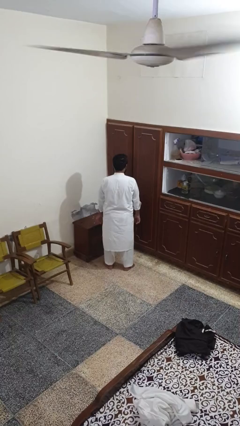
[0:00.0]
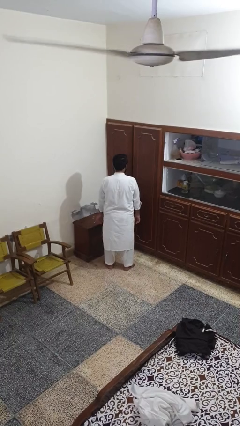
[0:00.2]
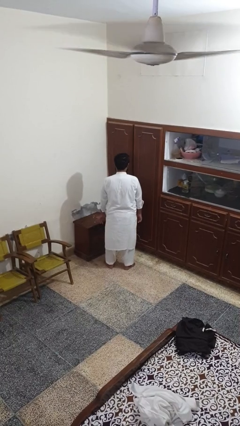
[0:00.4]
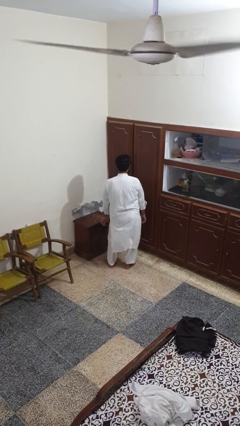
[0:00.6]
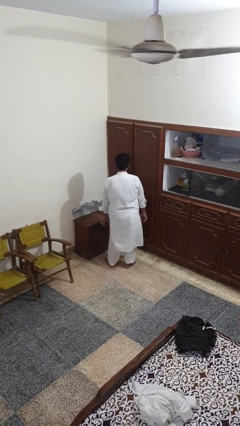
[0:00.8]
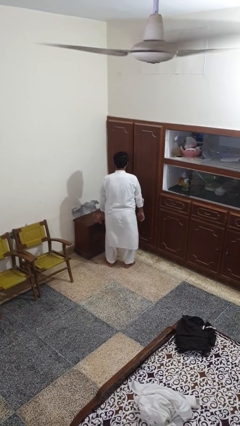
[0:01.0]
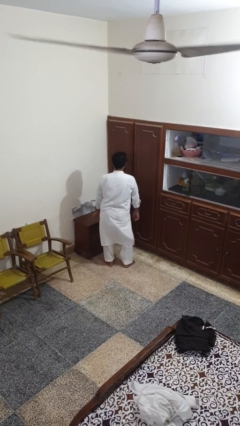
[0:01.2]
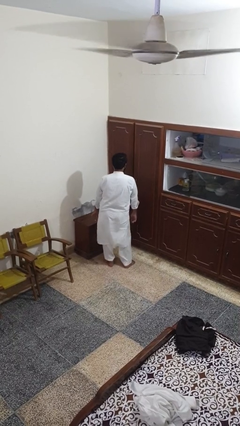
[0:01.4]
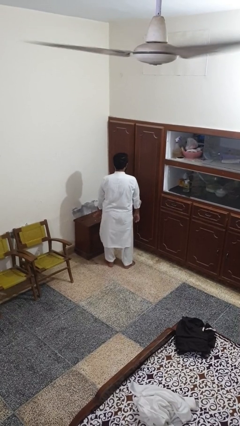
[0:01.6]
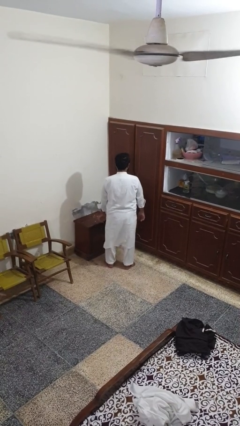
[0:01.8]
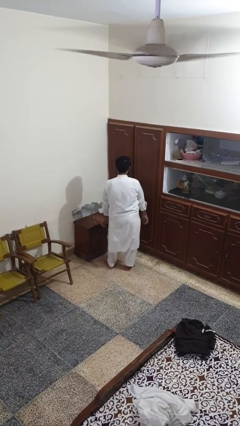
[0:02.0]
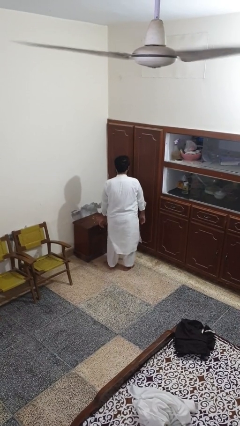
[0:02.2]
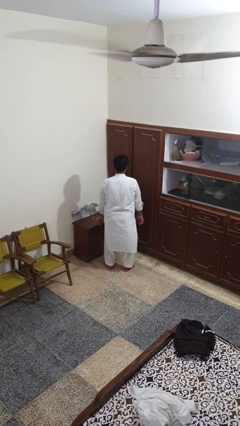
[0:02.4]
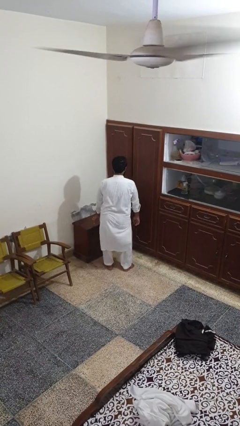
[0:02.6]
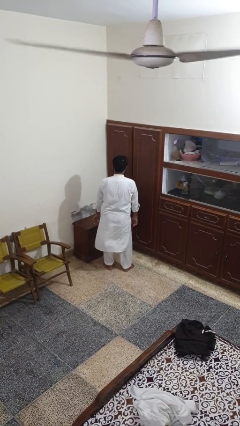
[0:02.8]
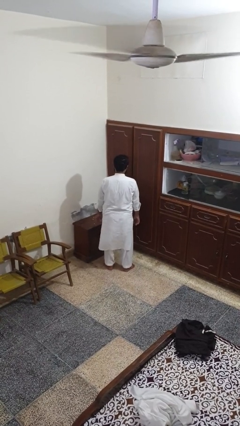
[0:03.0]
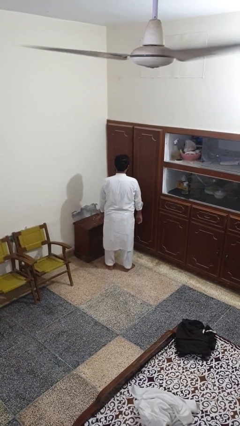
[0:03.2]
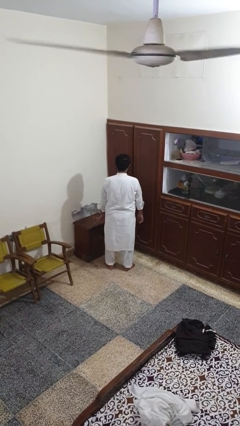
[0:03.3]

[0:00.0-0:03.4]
person wiggles hips

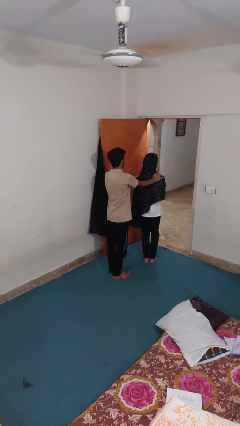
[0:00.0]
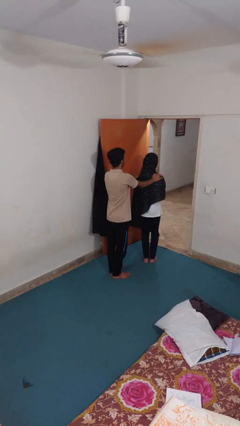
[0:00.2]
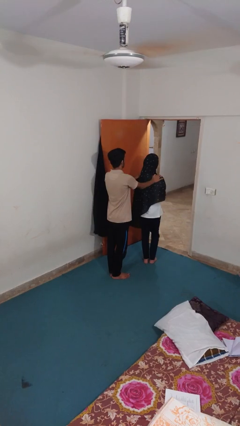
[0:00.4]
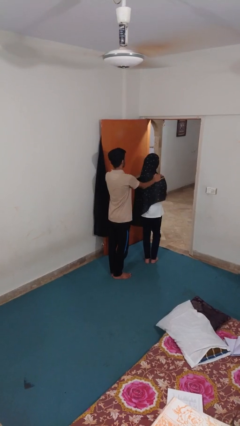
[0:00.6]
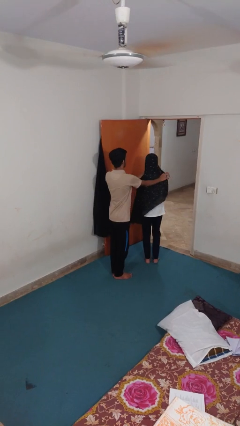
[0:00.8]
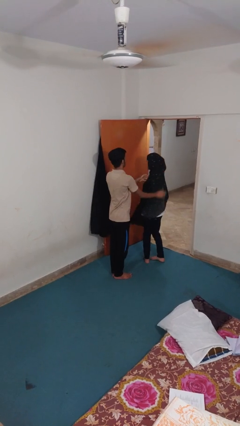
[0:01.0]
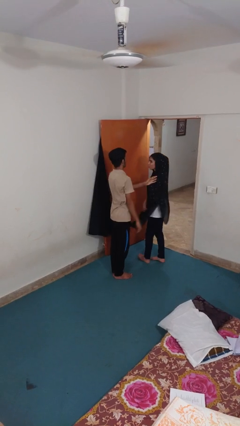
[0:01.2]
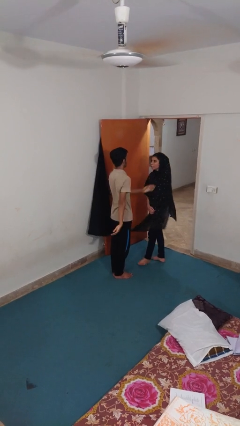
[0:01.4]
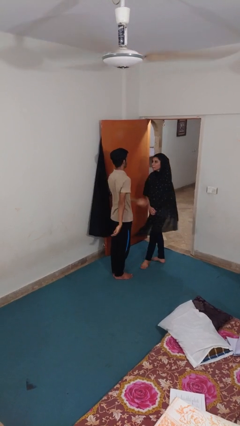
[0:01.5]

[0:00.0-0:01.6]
person spins person around

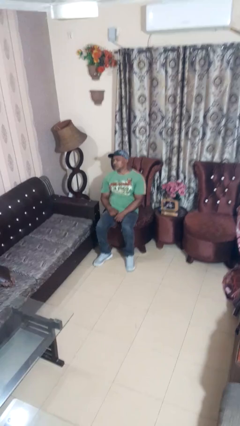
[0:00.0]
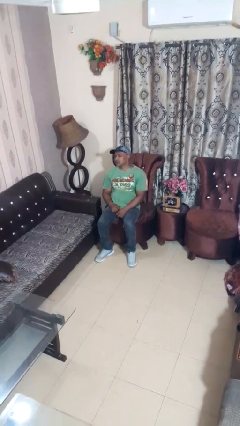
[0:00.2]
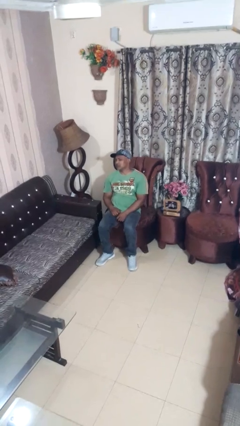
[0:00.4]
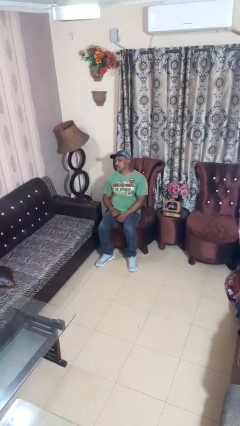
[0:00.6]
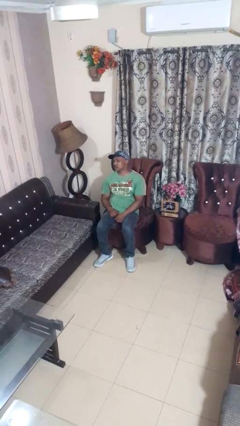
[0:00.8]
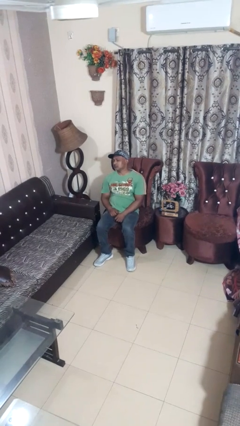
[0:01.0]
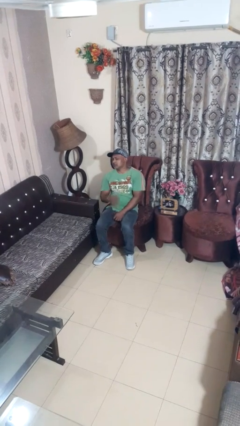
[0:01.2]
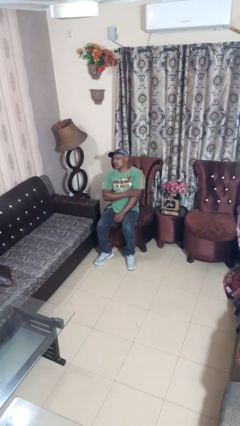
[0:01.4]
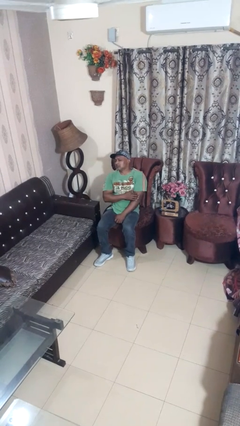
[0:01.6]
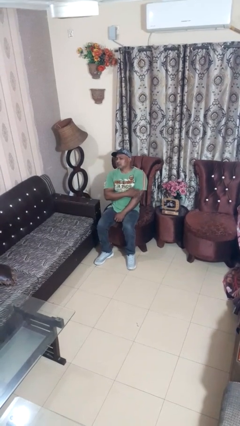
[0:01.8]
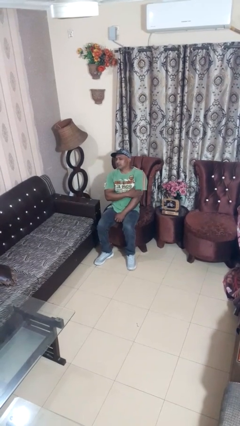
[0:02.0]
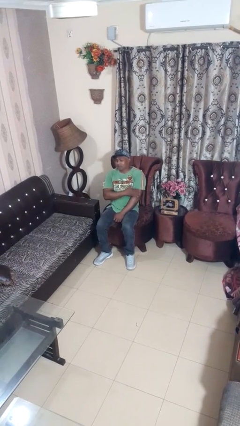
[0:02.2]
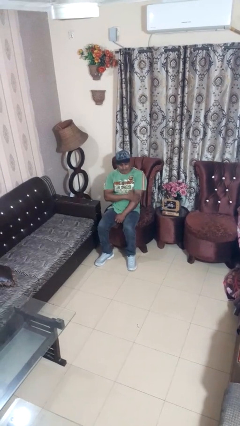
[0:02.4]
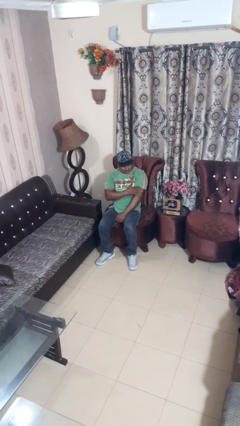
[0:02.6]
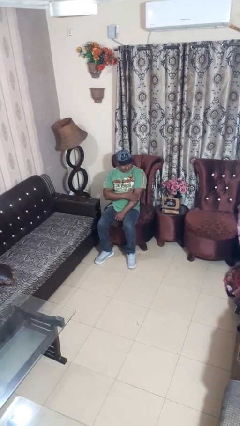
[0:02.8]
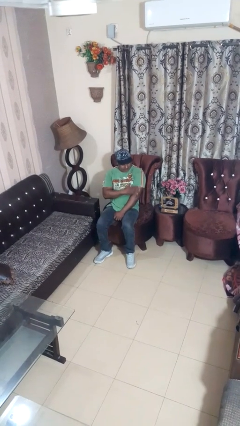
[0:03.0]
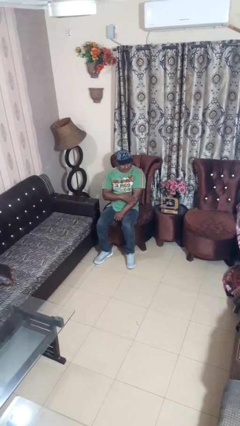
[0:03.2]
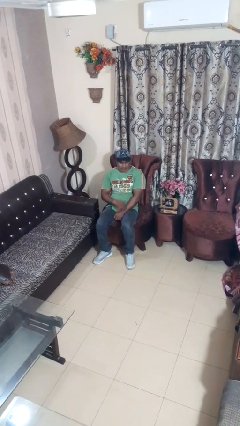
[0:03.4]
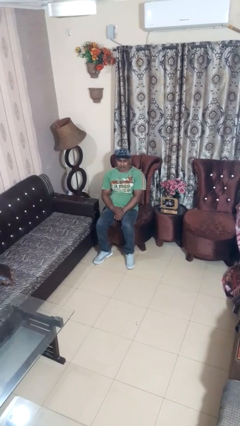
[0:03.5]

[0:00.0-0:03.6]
person swats bug

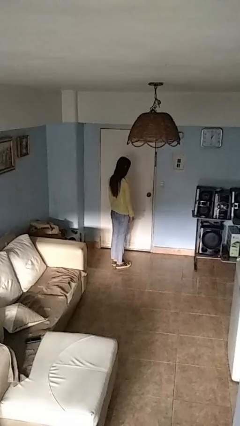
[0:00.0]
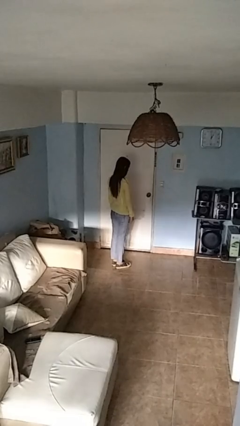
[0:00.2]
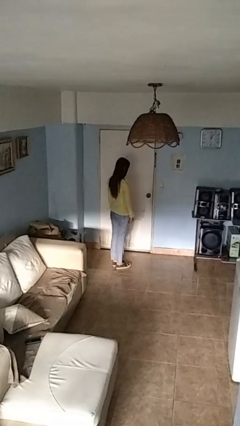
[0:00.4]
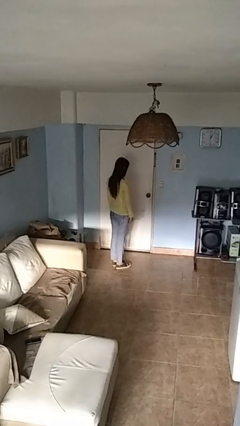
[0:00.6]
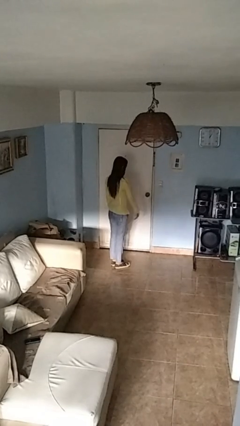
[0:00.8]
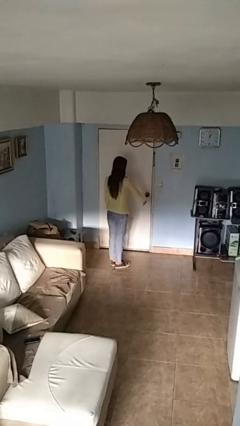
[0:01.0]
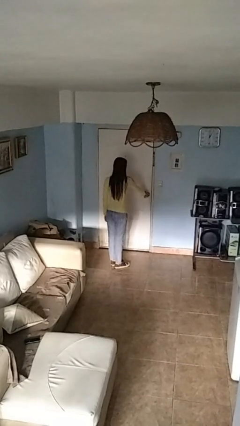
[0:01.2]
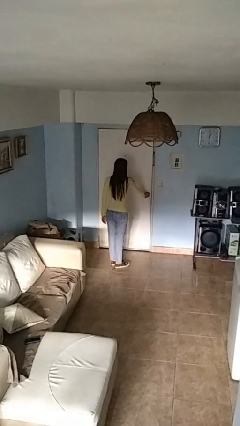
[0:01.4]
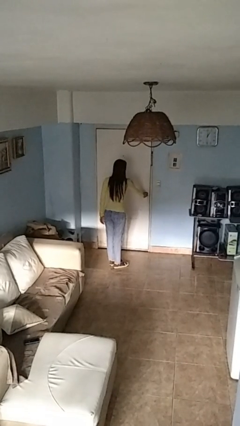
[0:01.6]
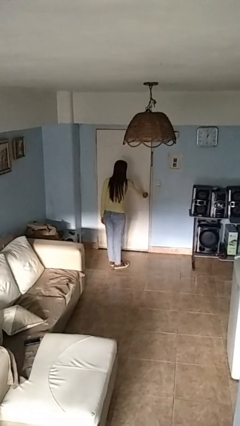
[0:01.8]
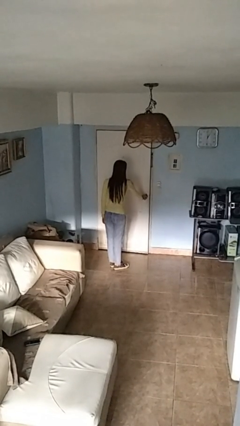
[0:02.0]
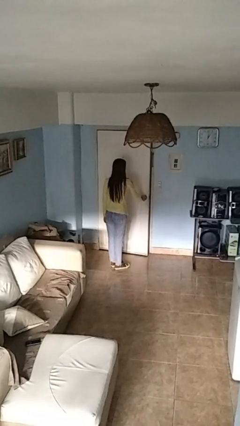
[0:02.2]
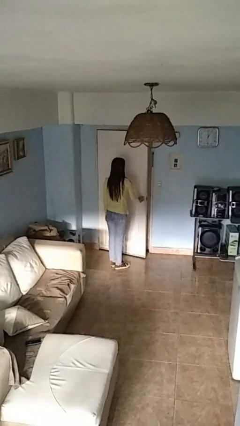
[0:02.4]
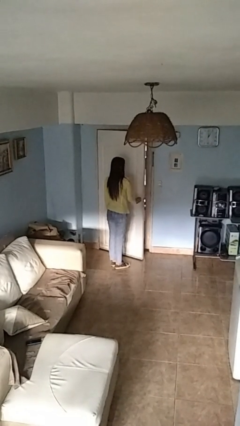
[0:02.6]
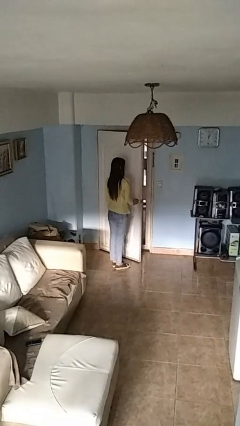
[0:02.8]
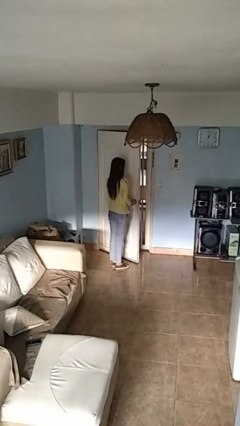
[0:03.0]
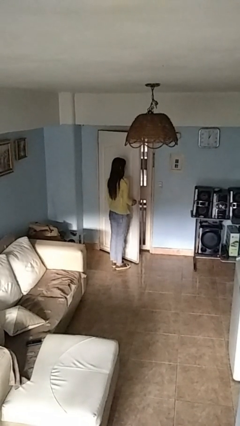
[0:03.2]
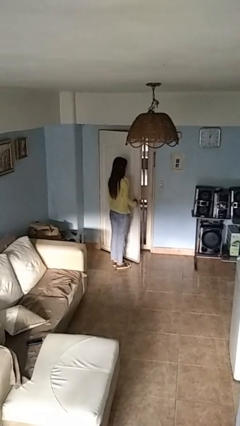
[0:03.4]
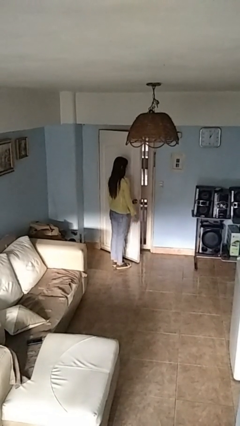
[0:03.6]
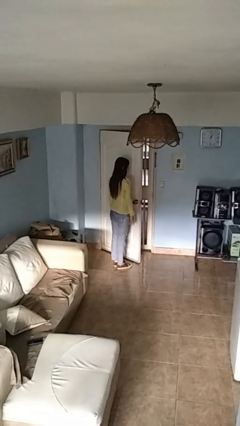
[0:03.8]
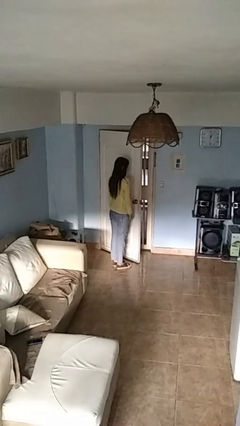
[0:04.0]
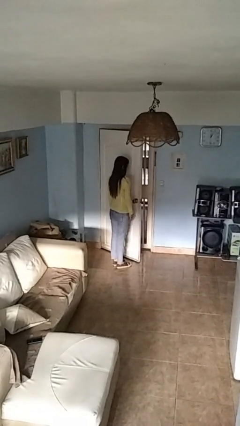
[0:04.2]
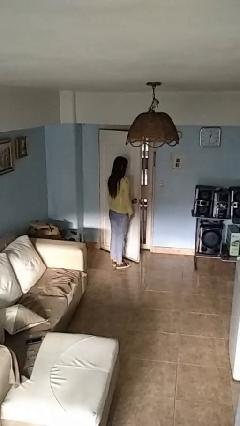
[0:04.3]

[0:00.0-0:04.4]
person opens facility door

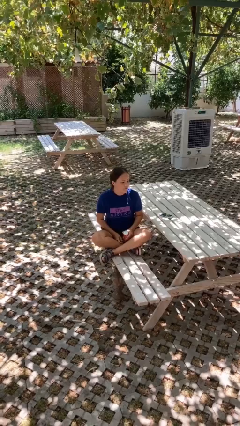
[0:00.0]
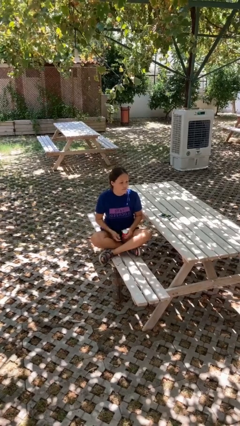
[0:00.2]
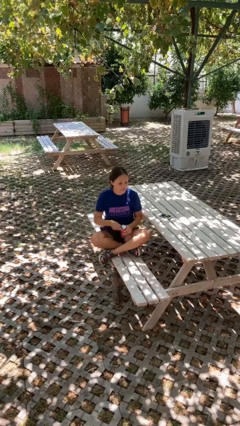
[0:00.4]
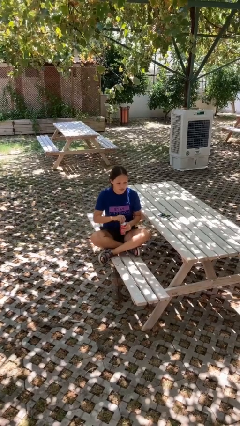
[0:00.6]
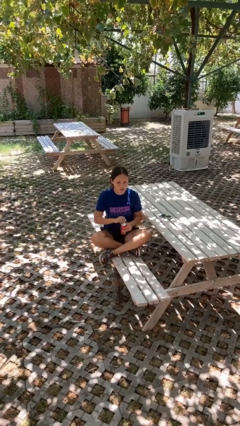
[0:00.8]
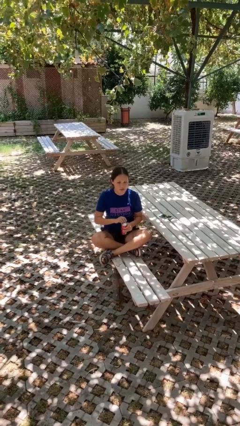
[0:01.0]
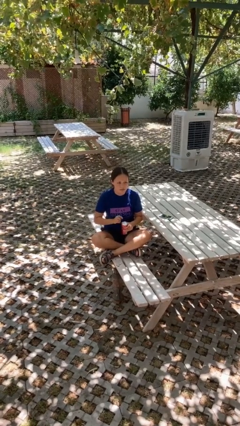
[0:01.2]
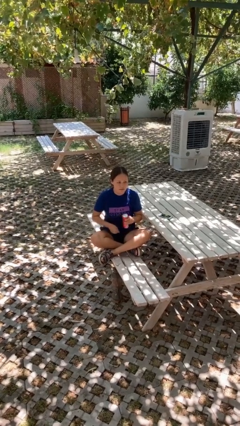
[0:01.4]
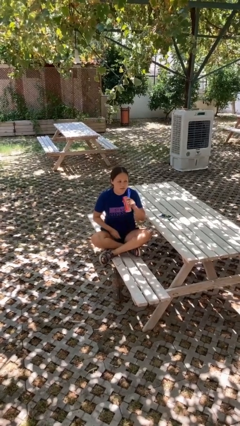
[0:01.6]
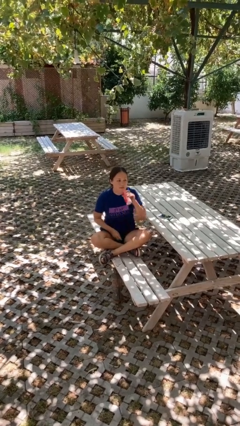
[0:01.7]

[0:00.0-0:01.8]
person opens beverage can

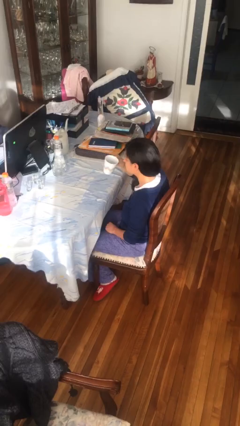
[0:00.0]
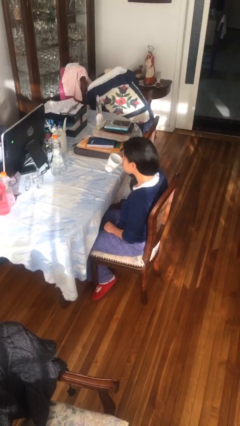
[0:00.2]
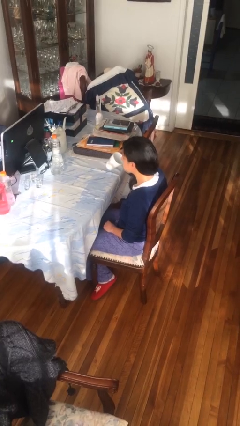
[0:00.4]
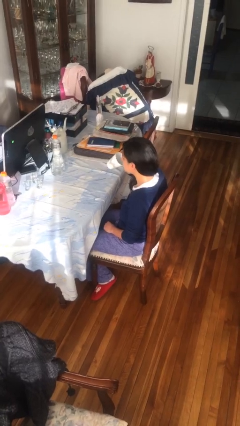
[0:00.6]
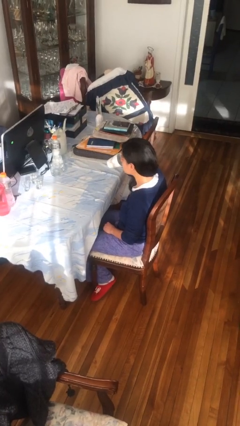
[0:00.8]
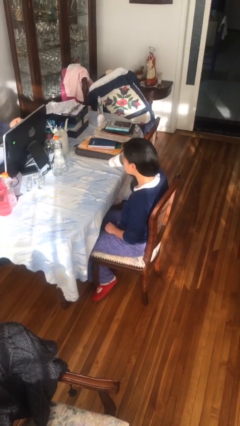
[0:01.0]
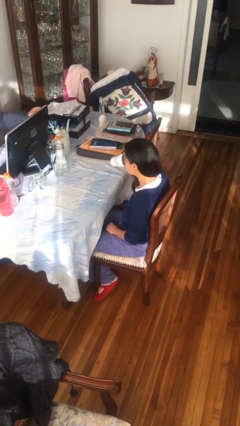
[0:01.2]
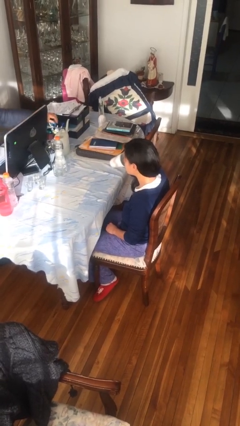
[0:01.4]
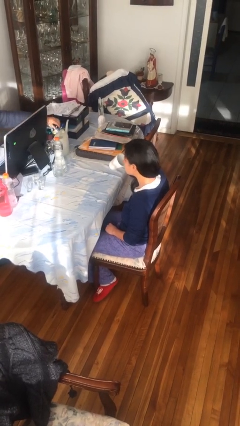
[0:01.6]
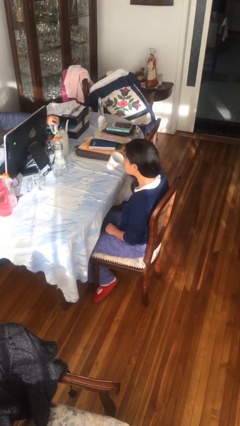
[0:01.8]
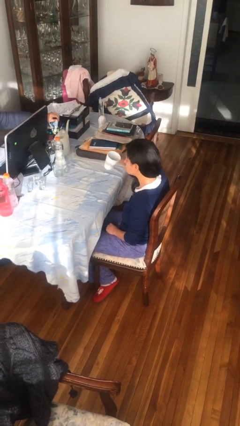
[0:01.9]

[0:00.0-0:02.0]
person drinks from mug

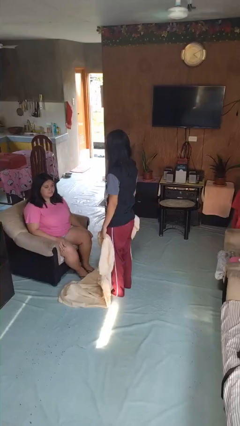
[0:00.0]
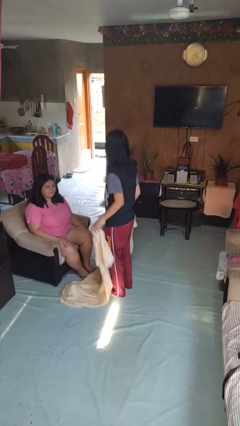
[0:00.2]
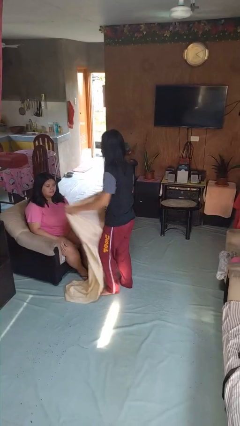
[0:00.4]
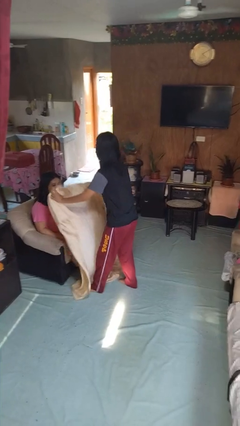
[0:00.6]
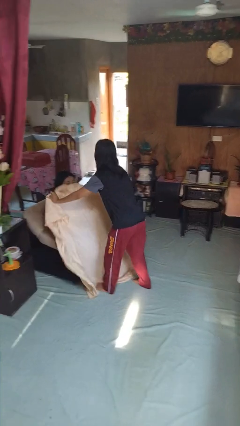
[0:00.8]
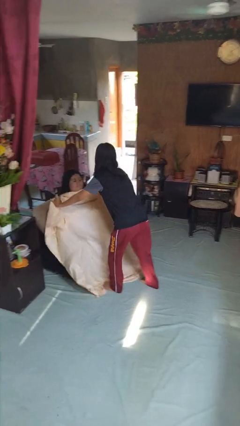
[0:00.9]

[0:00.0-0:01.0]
person covers friend with blanket
